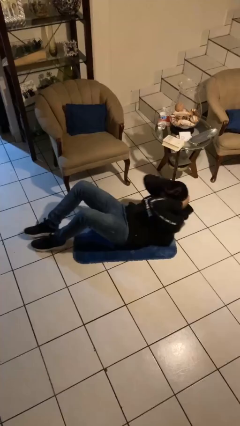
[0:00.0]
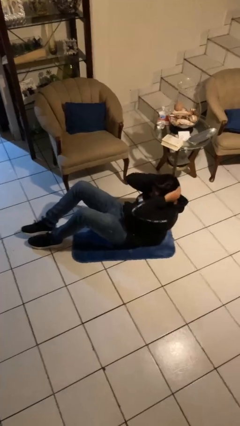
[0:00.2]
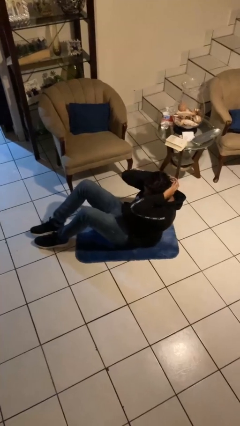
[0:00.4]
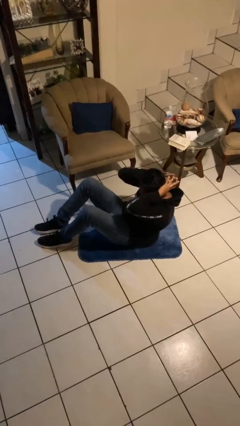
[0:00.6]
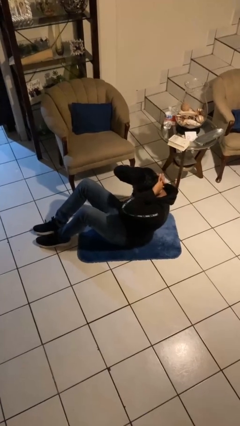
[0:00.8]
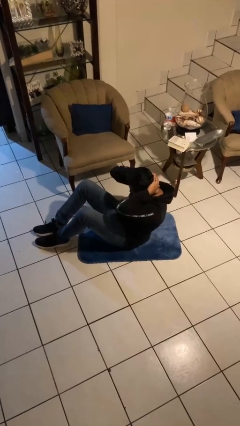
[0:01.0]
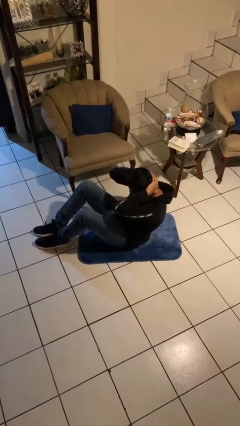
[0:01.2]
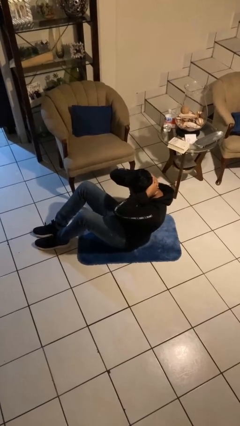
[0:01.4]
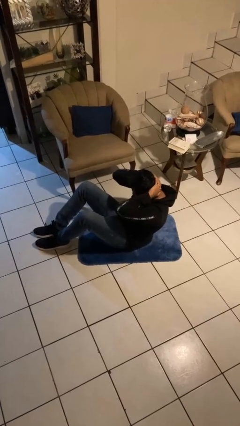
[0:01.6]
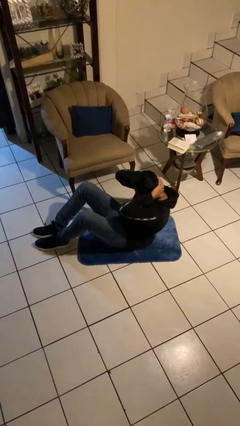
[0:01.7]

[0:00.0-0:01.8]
person exercises with situp

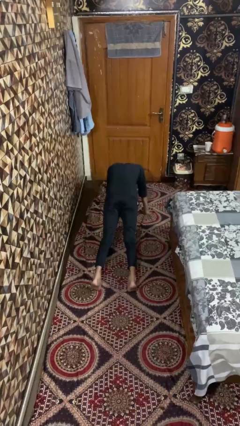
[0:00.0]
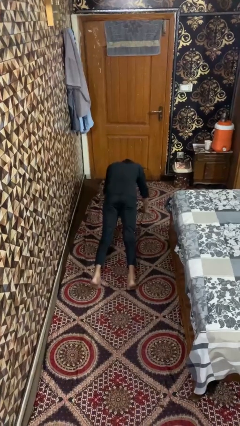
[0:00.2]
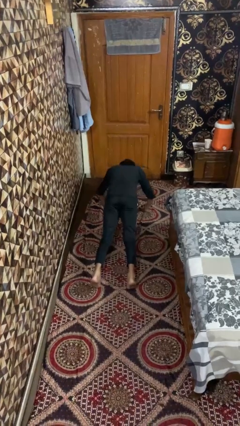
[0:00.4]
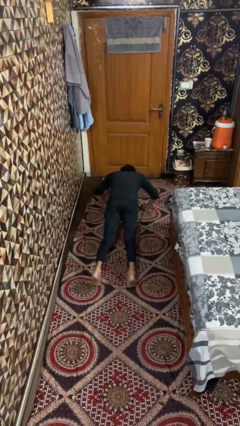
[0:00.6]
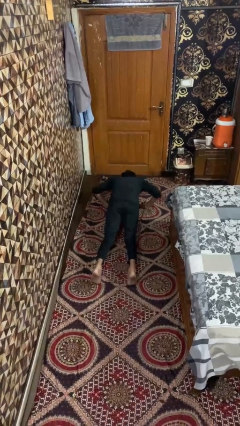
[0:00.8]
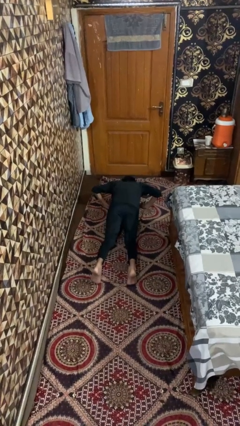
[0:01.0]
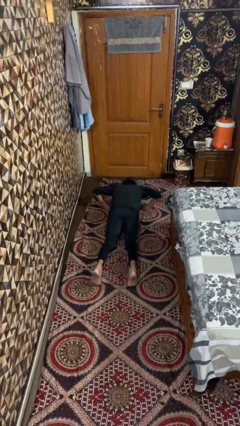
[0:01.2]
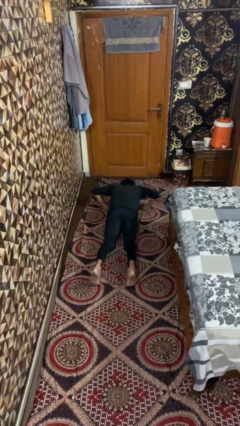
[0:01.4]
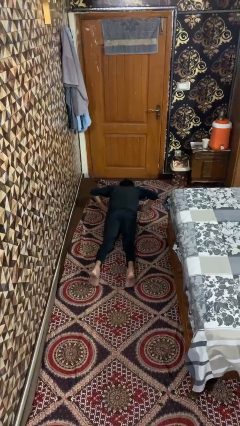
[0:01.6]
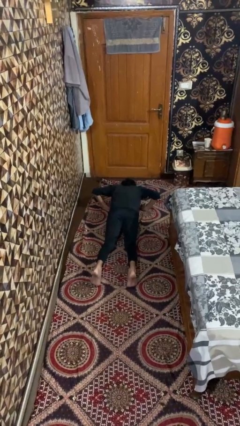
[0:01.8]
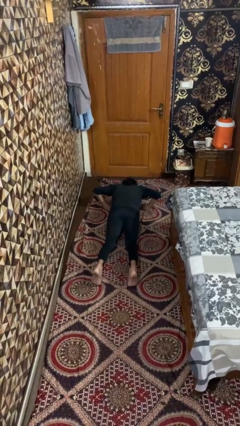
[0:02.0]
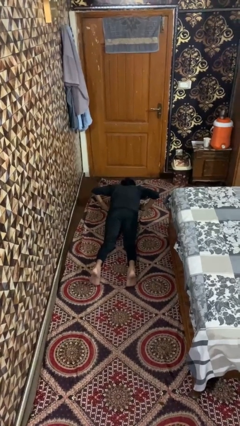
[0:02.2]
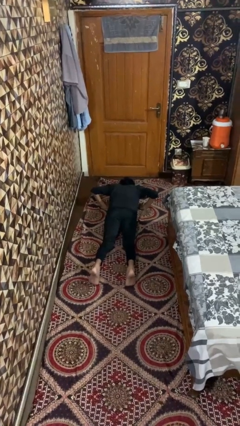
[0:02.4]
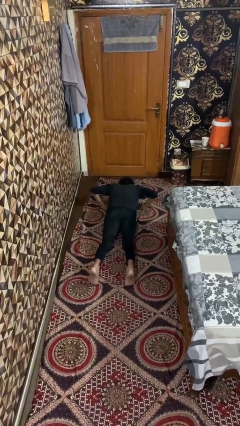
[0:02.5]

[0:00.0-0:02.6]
person exercises with pushup

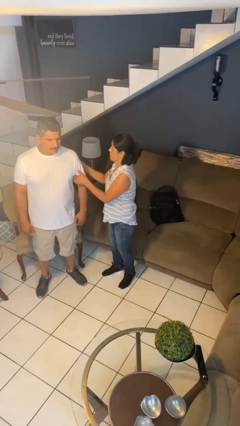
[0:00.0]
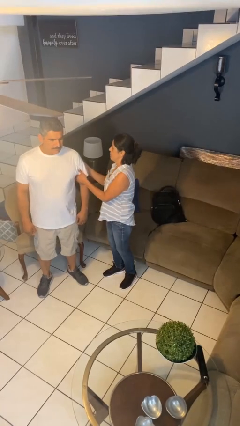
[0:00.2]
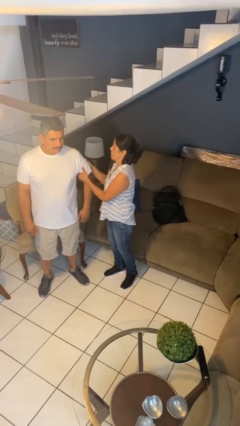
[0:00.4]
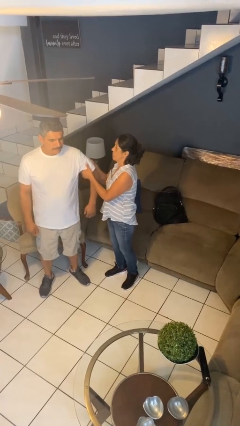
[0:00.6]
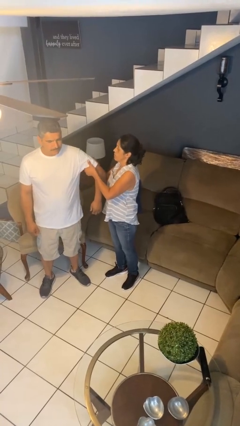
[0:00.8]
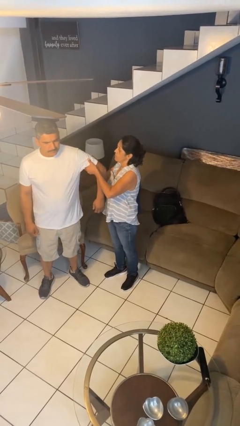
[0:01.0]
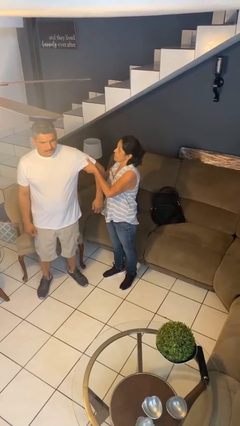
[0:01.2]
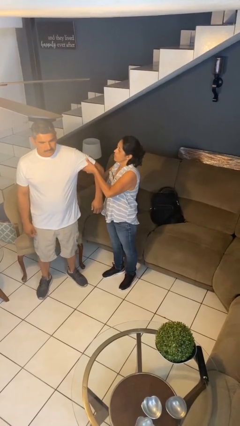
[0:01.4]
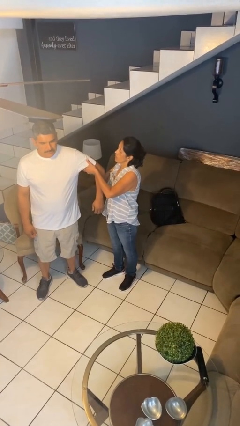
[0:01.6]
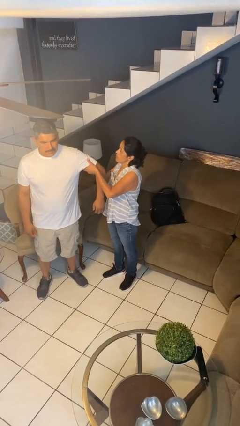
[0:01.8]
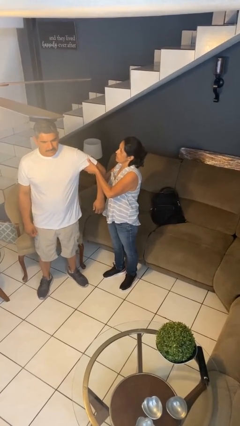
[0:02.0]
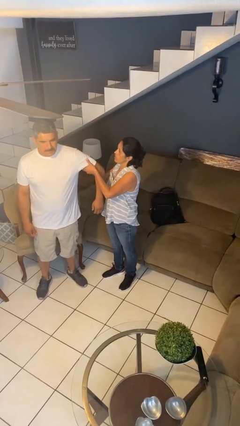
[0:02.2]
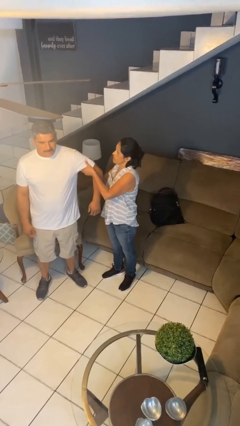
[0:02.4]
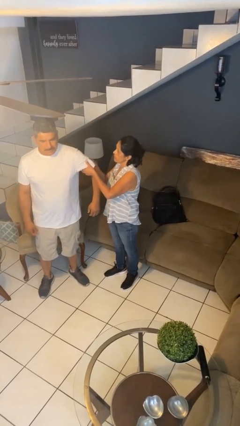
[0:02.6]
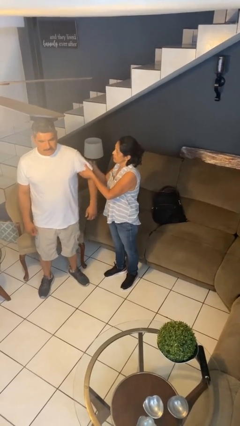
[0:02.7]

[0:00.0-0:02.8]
person grabs person by bicep

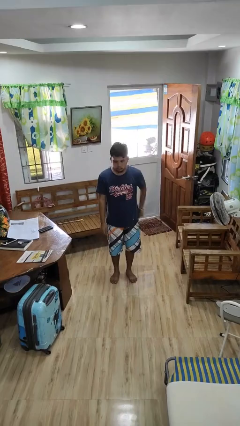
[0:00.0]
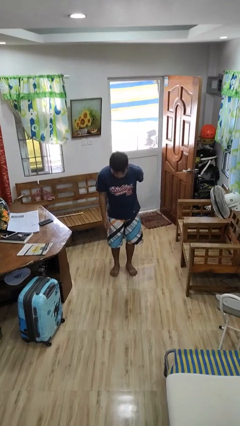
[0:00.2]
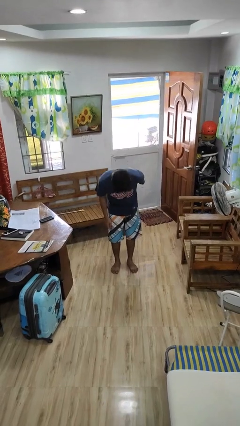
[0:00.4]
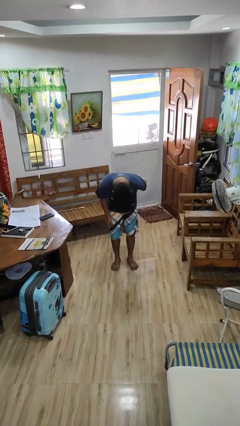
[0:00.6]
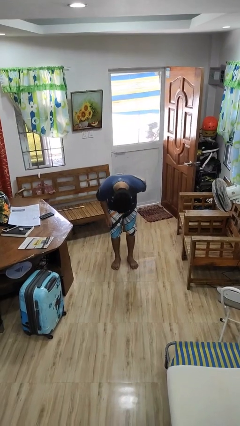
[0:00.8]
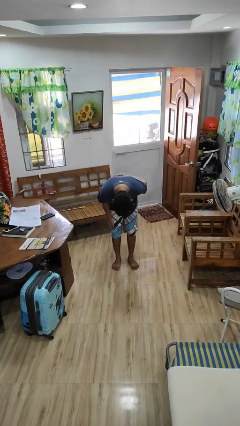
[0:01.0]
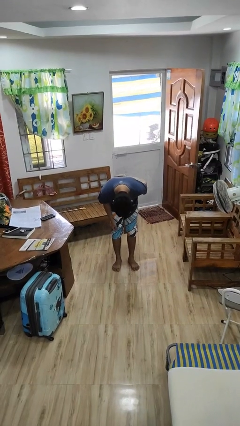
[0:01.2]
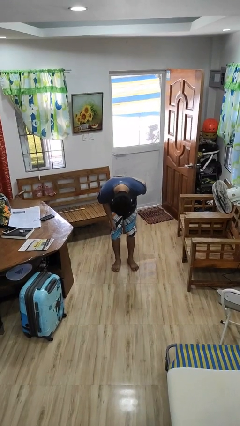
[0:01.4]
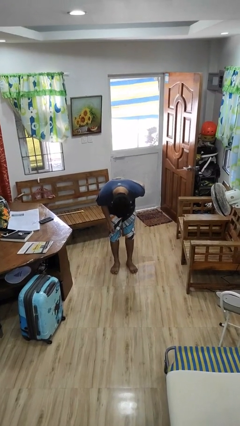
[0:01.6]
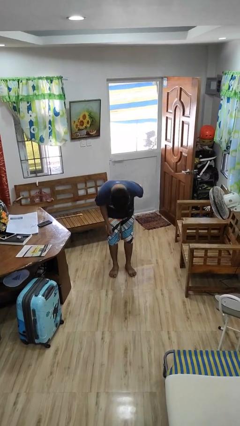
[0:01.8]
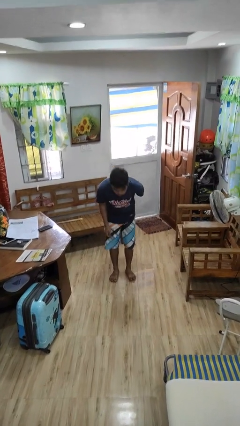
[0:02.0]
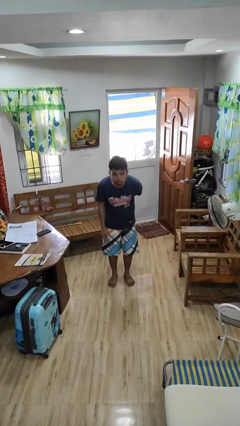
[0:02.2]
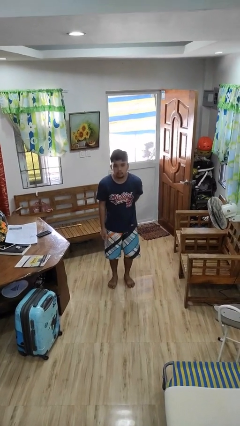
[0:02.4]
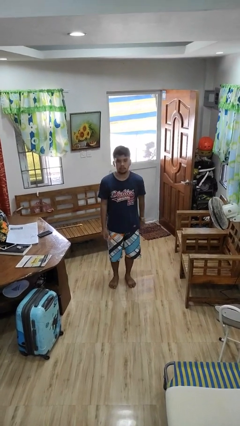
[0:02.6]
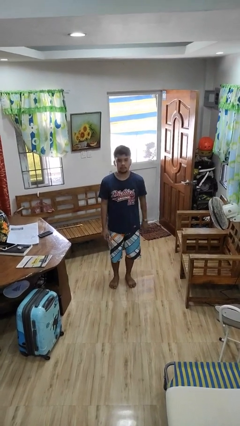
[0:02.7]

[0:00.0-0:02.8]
person bows

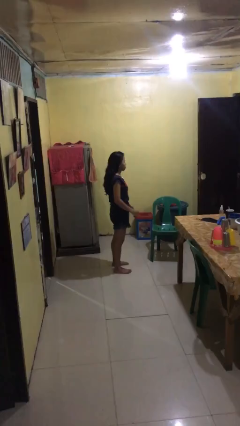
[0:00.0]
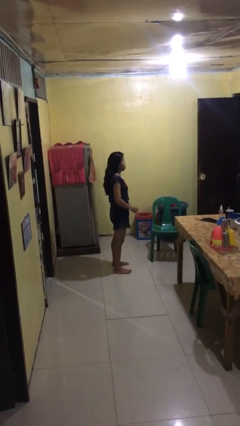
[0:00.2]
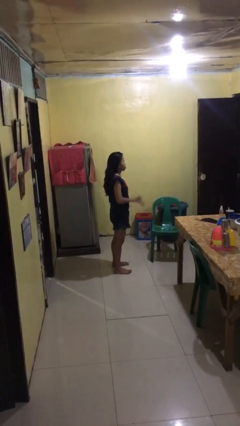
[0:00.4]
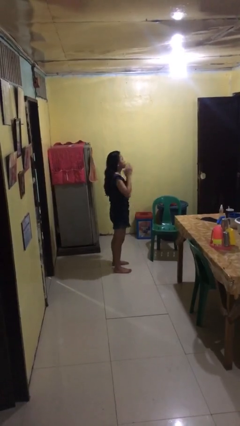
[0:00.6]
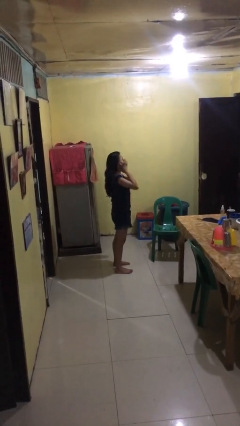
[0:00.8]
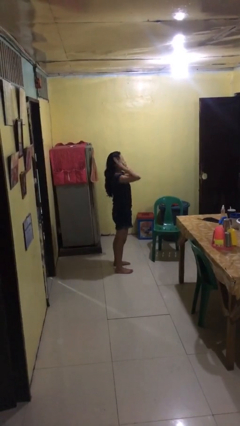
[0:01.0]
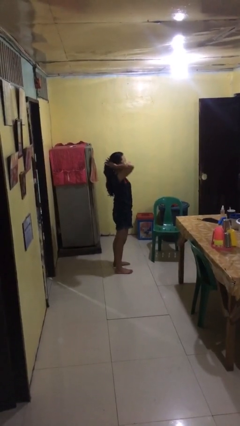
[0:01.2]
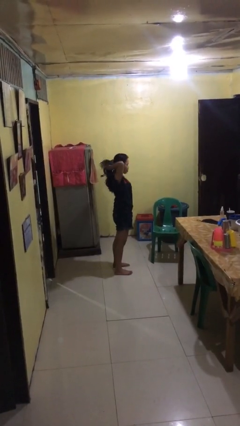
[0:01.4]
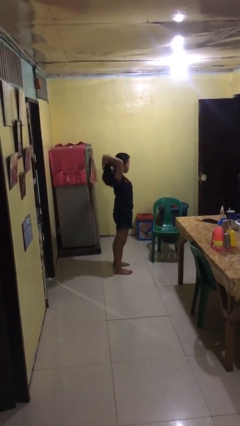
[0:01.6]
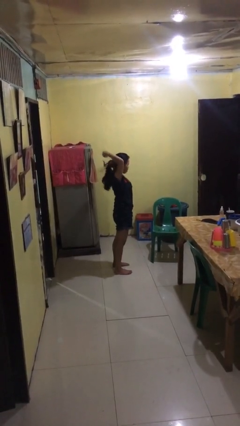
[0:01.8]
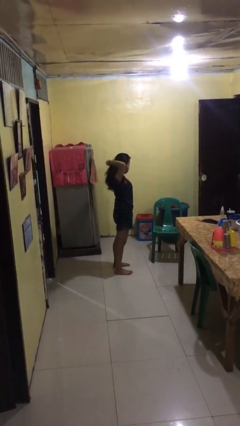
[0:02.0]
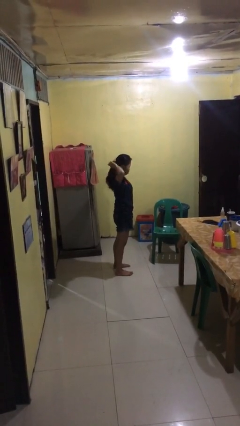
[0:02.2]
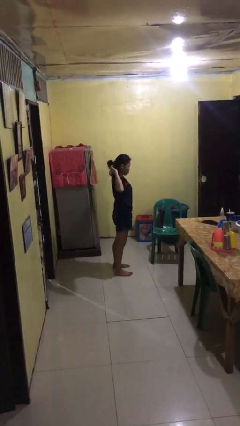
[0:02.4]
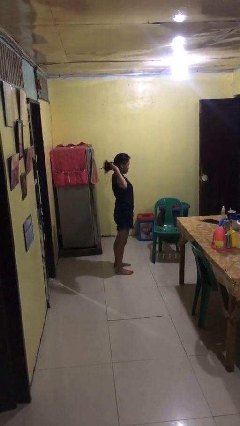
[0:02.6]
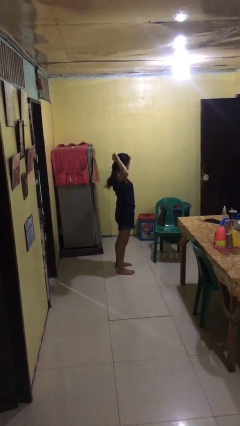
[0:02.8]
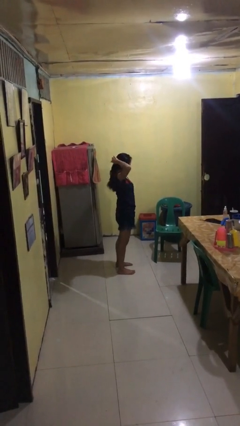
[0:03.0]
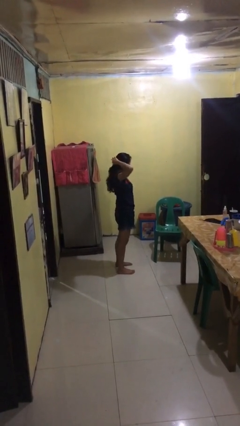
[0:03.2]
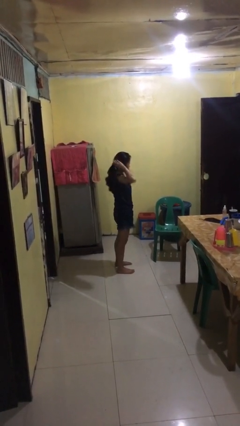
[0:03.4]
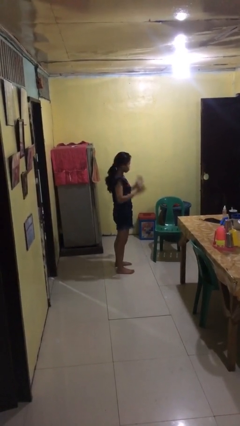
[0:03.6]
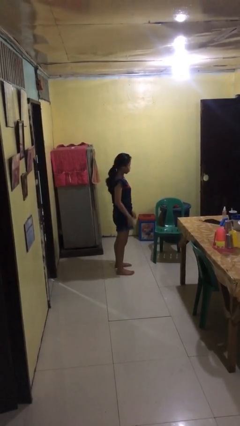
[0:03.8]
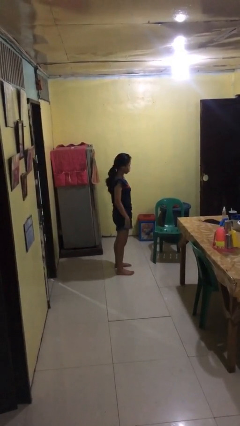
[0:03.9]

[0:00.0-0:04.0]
person puts hair in ponytail

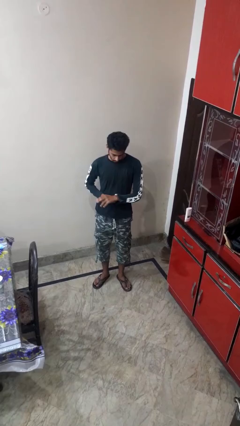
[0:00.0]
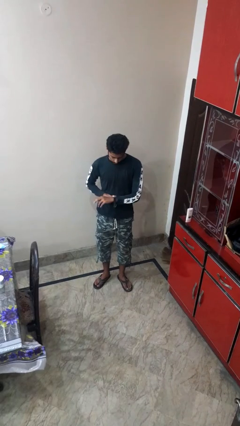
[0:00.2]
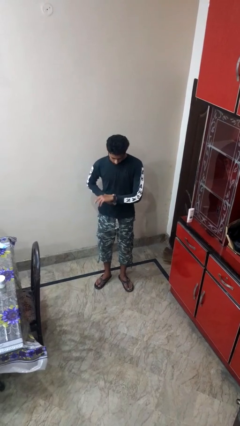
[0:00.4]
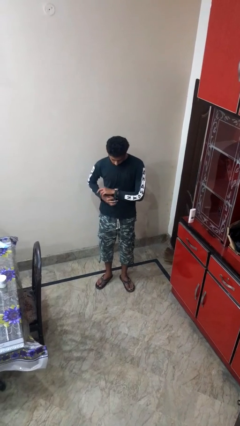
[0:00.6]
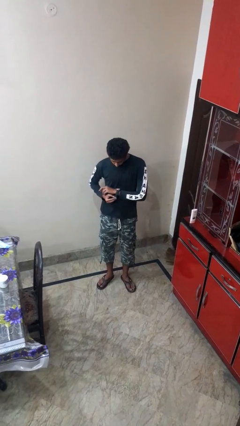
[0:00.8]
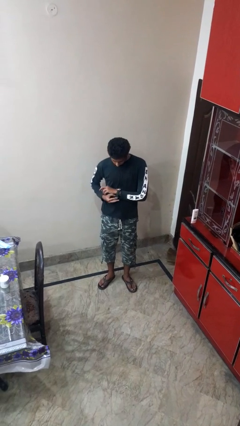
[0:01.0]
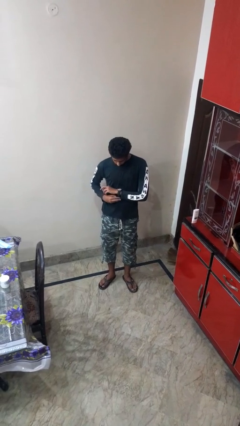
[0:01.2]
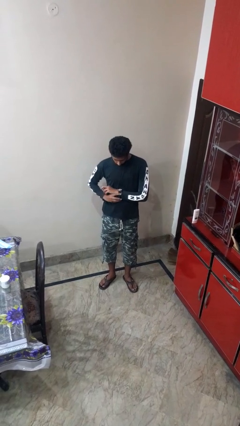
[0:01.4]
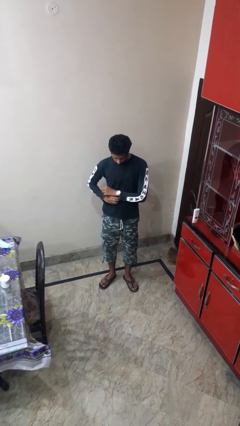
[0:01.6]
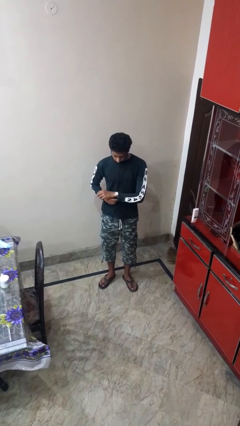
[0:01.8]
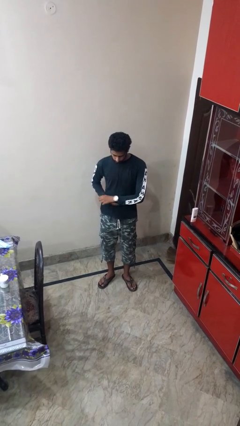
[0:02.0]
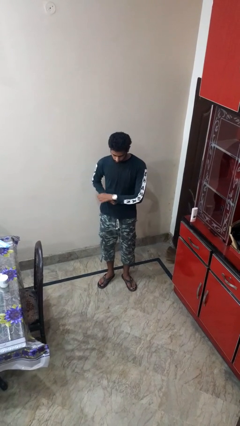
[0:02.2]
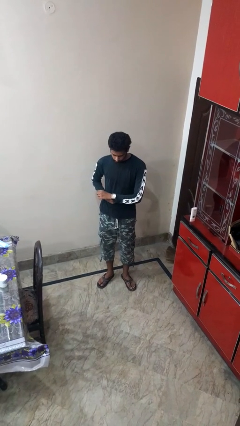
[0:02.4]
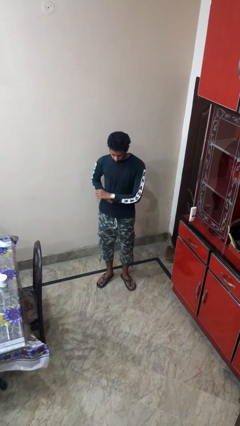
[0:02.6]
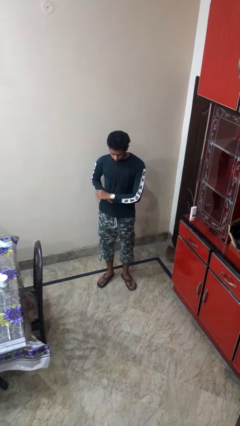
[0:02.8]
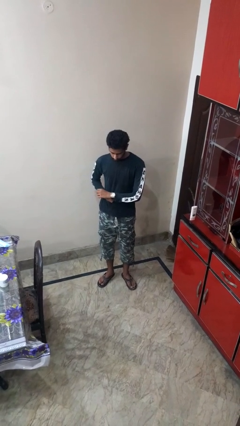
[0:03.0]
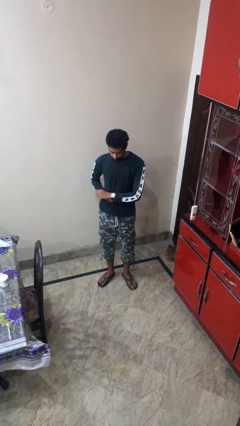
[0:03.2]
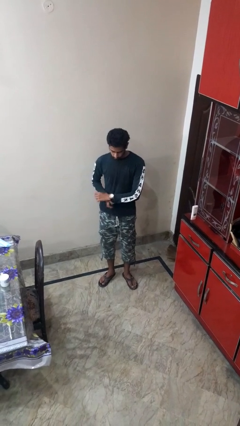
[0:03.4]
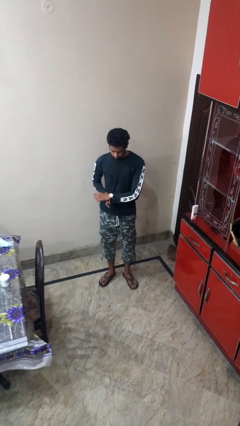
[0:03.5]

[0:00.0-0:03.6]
person puts on wristwatch
